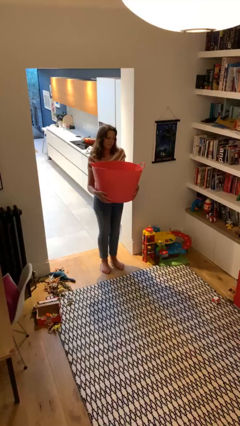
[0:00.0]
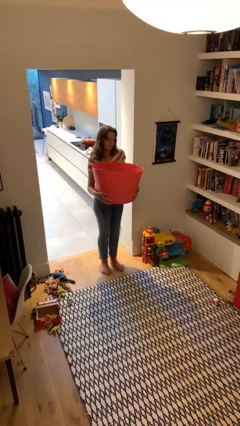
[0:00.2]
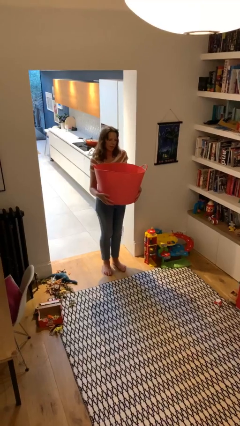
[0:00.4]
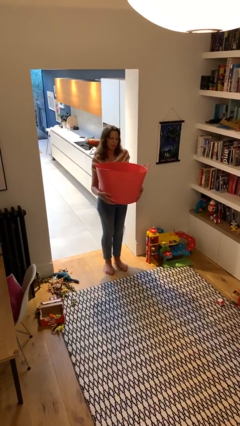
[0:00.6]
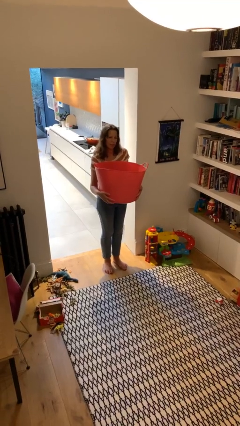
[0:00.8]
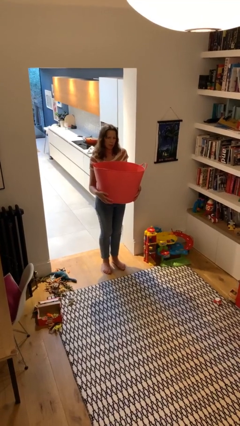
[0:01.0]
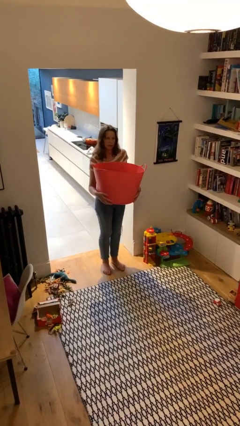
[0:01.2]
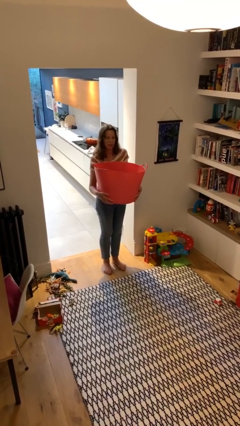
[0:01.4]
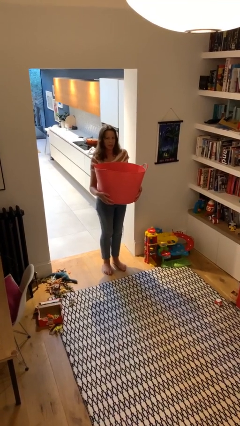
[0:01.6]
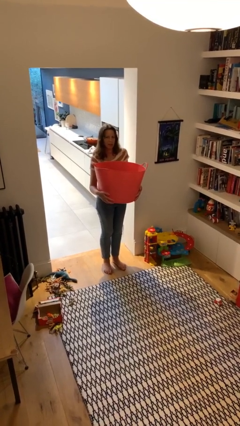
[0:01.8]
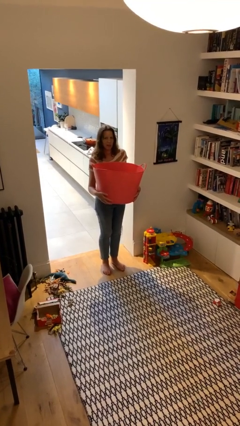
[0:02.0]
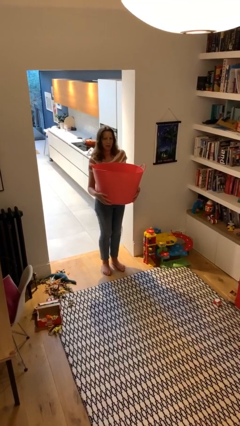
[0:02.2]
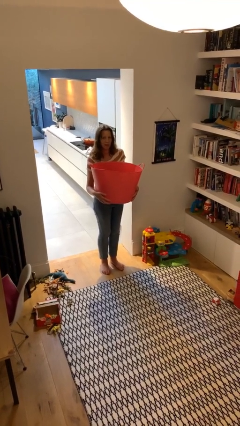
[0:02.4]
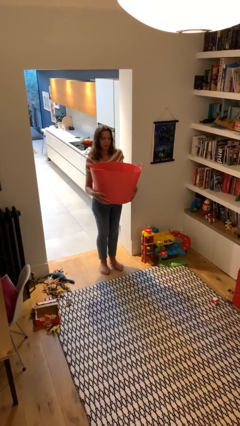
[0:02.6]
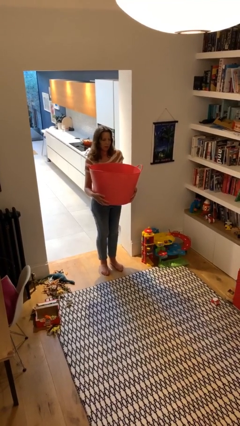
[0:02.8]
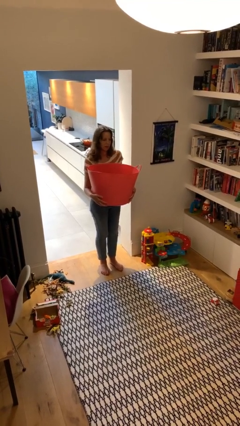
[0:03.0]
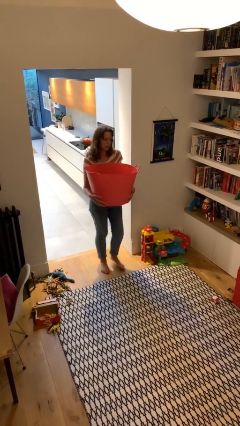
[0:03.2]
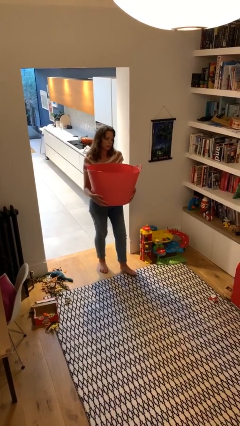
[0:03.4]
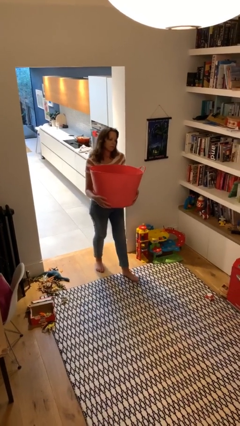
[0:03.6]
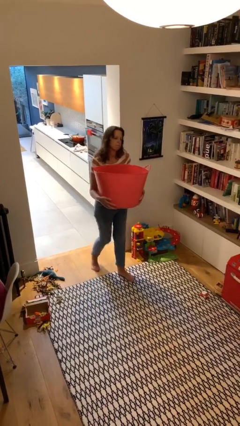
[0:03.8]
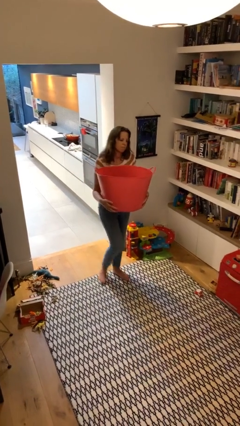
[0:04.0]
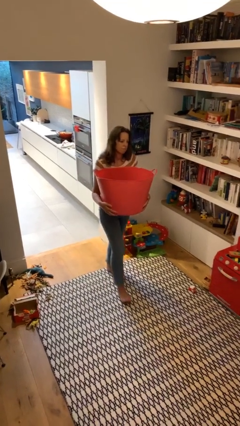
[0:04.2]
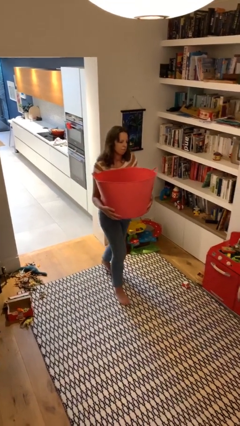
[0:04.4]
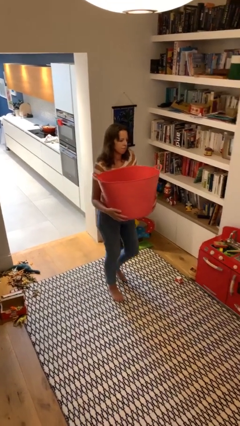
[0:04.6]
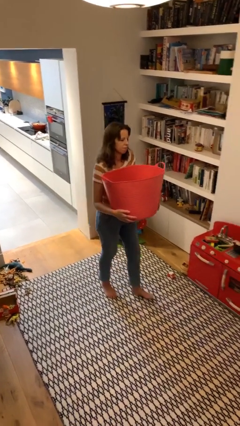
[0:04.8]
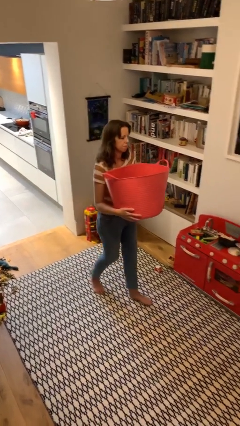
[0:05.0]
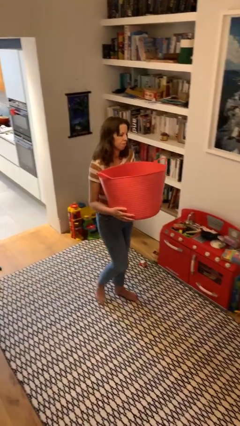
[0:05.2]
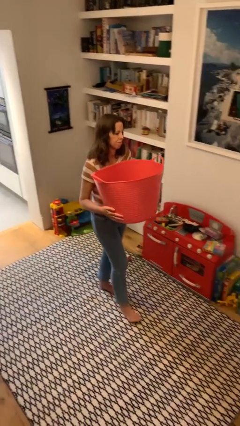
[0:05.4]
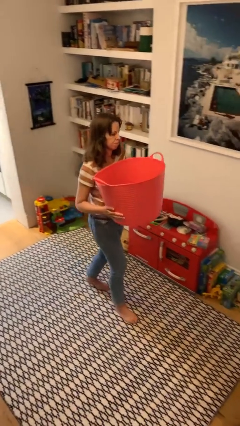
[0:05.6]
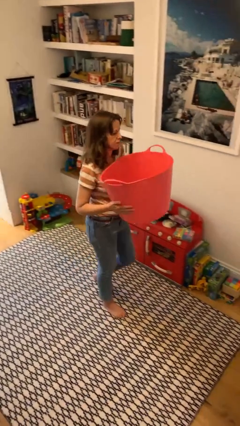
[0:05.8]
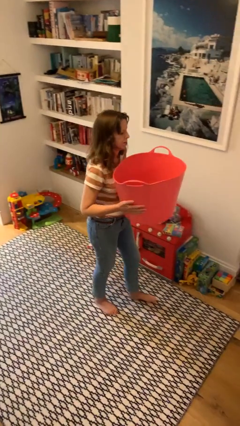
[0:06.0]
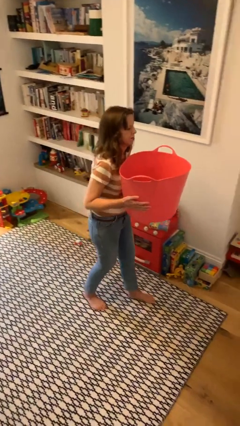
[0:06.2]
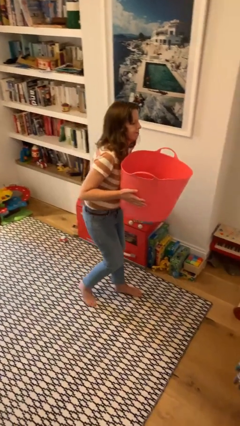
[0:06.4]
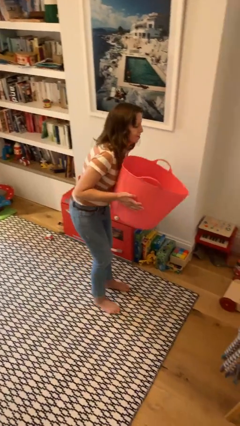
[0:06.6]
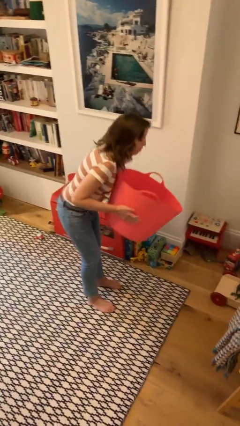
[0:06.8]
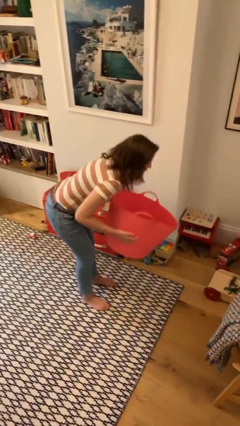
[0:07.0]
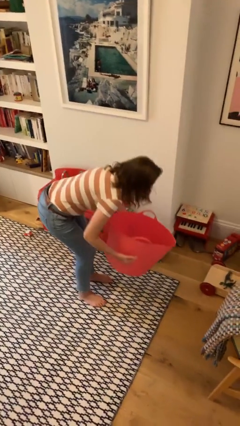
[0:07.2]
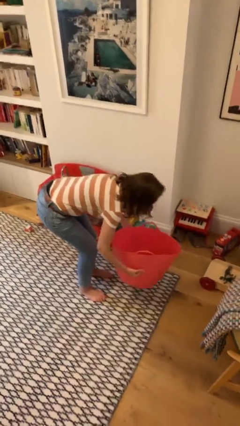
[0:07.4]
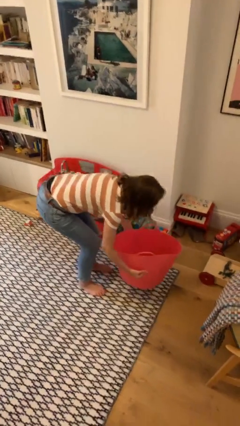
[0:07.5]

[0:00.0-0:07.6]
person carries heavy object

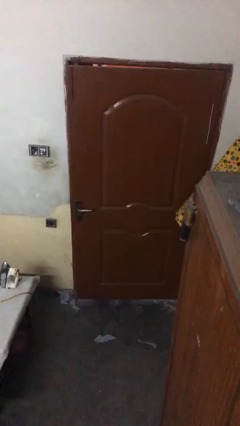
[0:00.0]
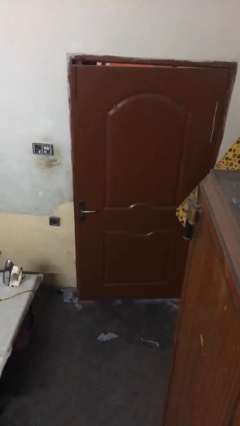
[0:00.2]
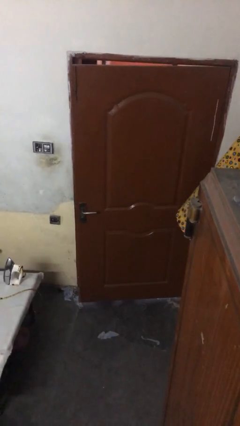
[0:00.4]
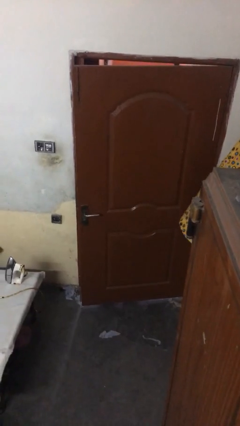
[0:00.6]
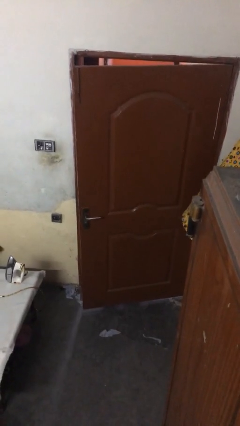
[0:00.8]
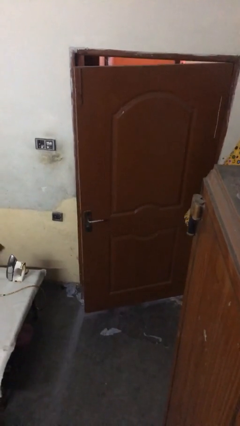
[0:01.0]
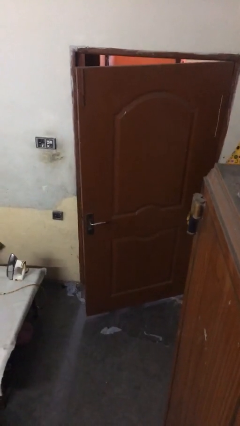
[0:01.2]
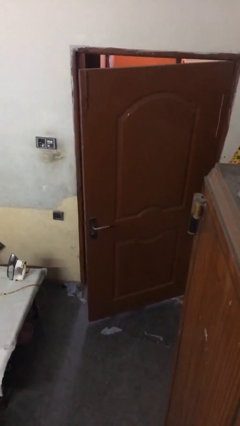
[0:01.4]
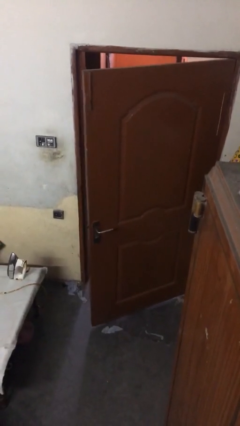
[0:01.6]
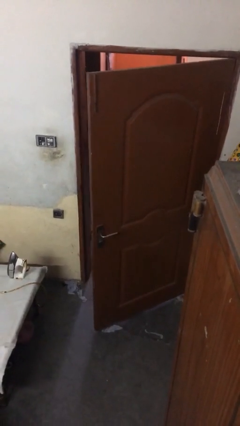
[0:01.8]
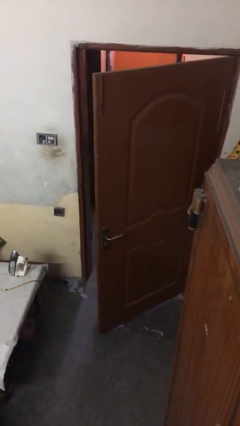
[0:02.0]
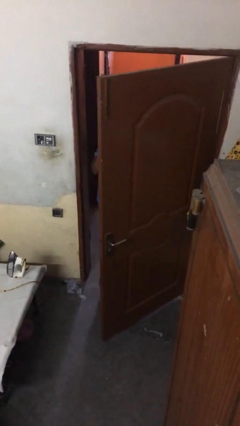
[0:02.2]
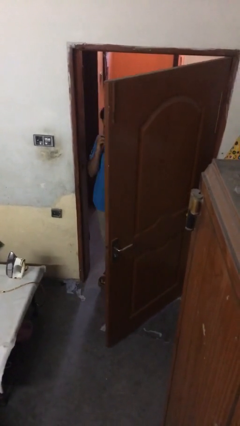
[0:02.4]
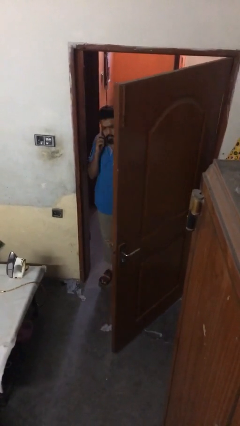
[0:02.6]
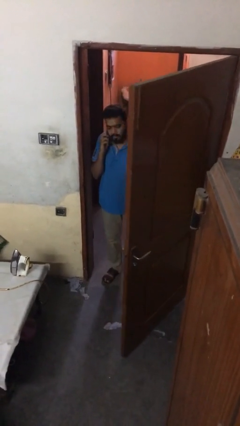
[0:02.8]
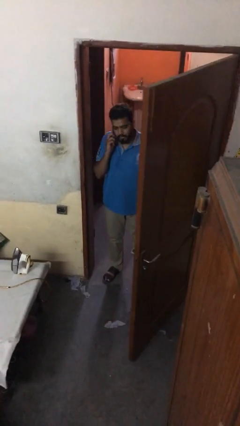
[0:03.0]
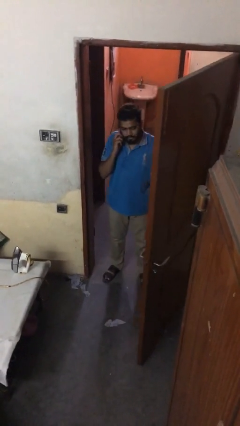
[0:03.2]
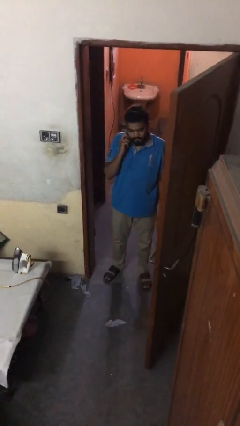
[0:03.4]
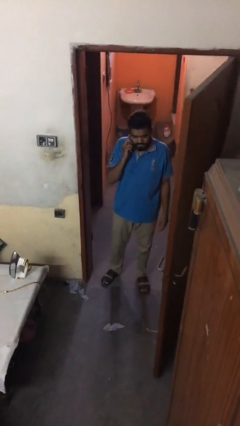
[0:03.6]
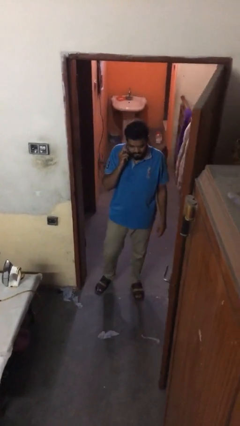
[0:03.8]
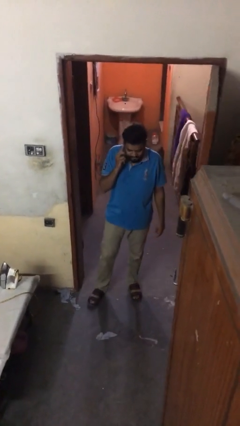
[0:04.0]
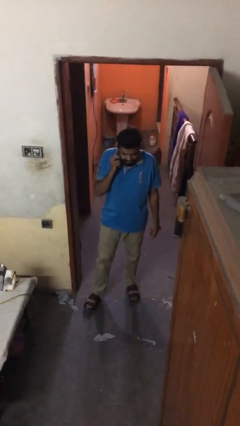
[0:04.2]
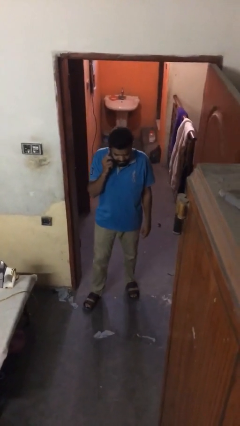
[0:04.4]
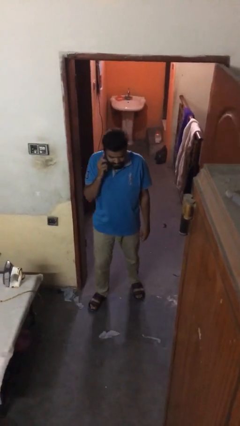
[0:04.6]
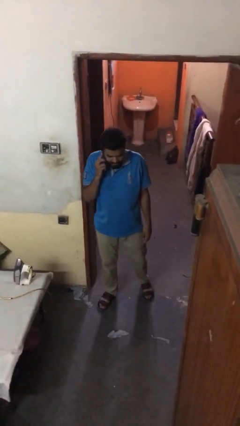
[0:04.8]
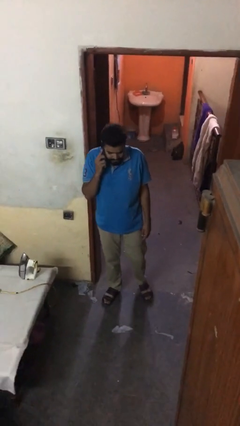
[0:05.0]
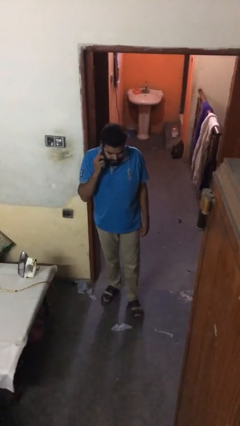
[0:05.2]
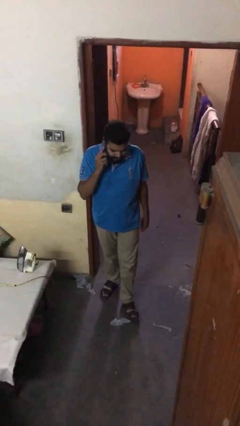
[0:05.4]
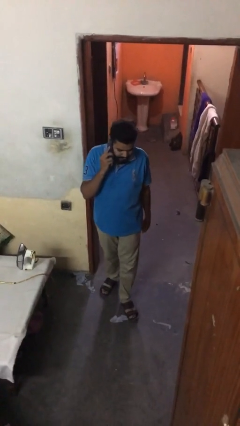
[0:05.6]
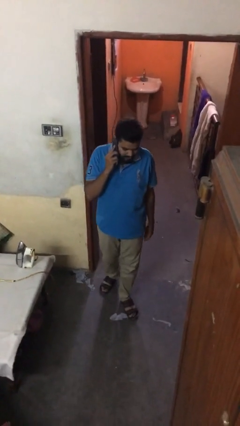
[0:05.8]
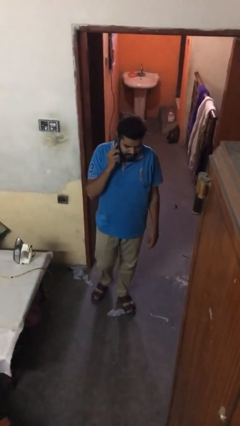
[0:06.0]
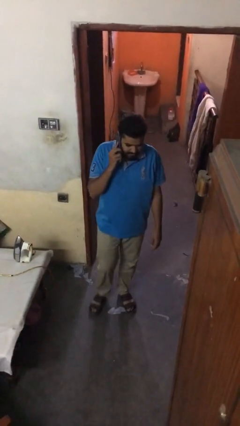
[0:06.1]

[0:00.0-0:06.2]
person opens facility door

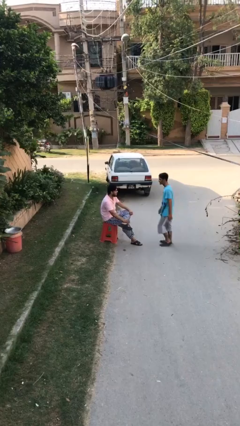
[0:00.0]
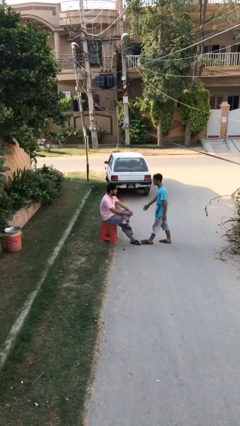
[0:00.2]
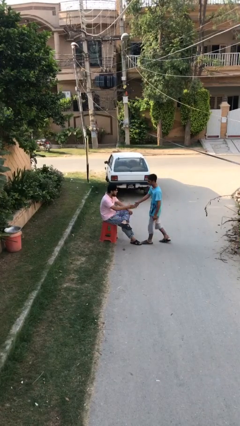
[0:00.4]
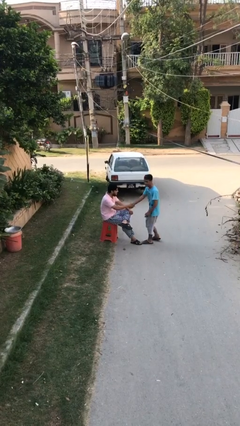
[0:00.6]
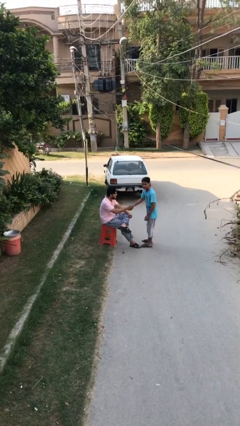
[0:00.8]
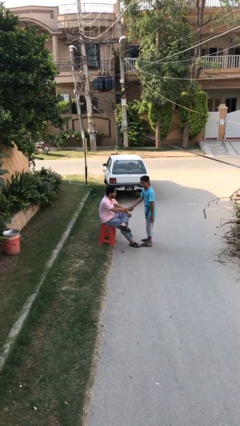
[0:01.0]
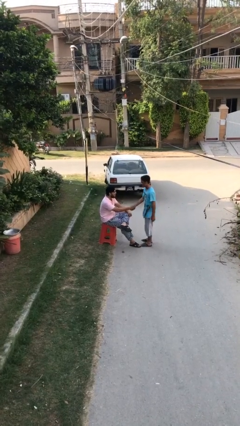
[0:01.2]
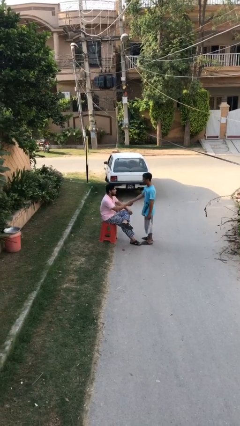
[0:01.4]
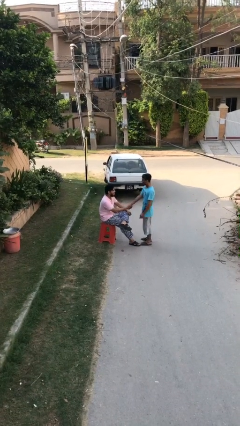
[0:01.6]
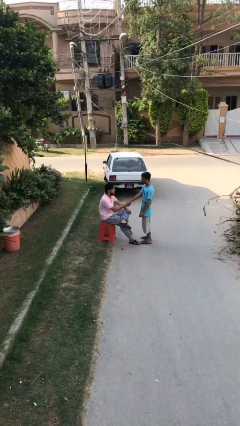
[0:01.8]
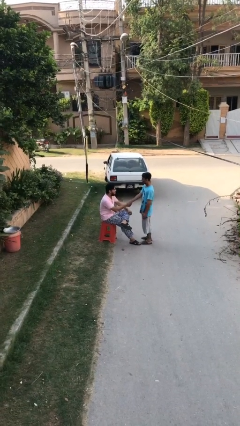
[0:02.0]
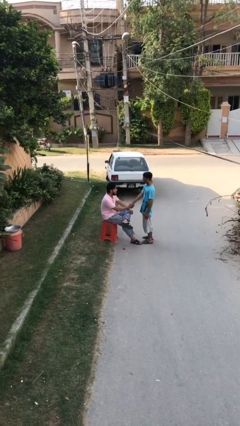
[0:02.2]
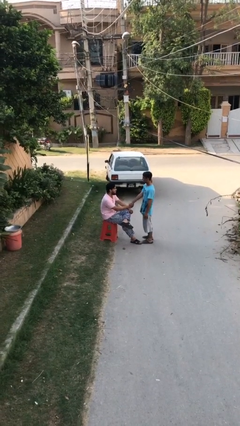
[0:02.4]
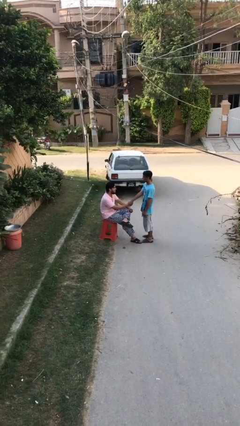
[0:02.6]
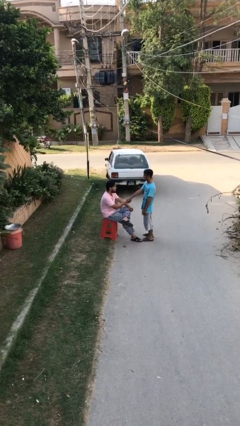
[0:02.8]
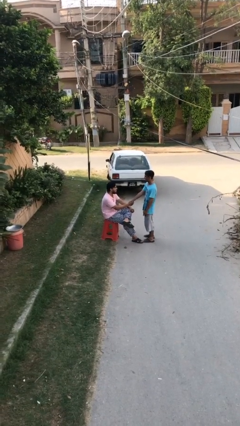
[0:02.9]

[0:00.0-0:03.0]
person shakes hand

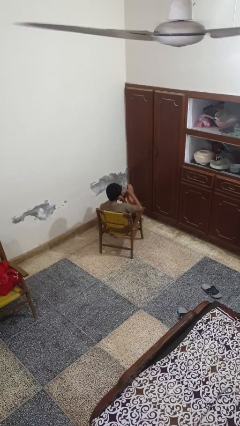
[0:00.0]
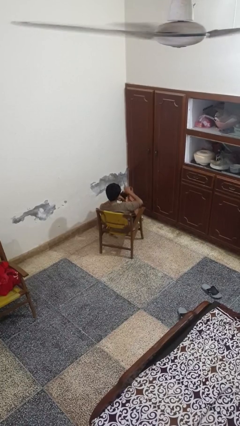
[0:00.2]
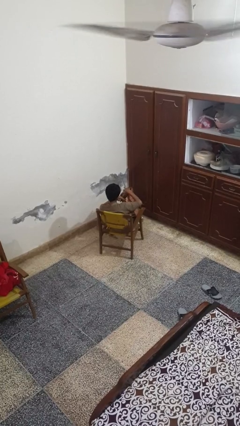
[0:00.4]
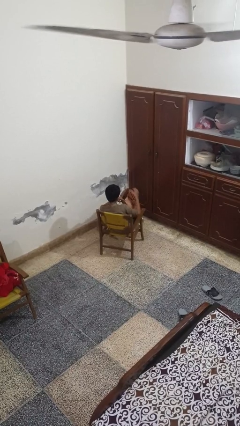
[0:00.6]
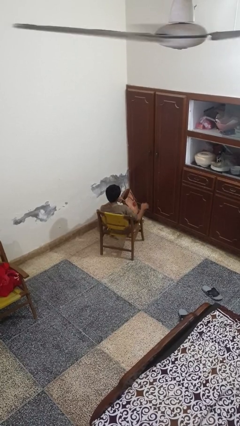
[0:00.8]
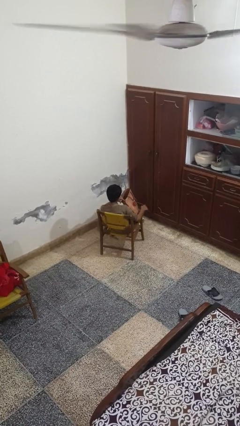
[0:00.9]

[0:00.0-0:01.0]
person puts object into bag
